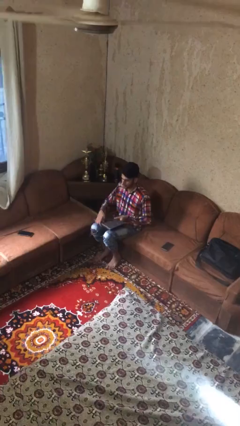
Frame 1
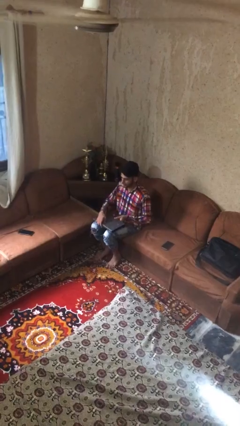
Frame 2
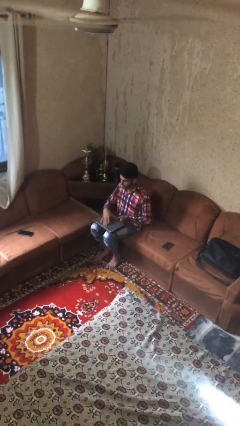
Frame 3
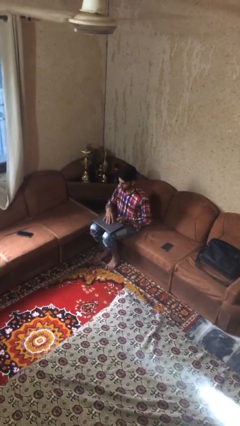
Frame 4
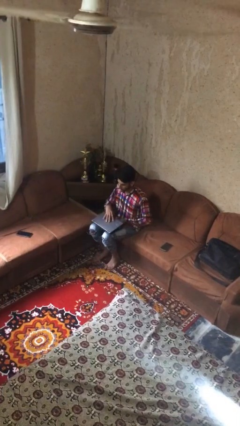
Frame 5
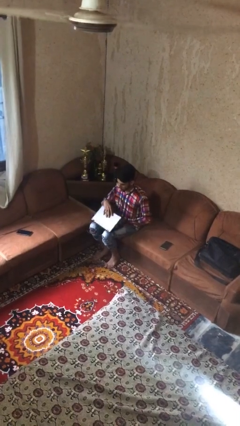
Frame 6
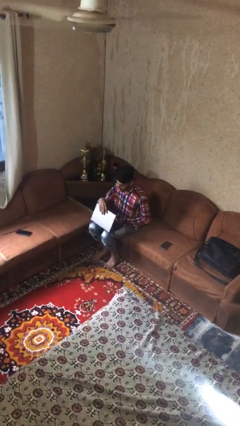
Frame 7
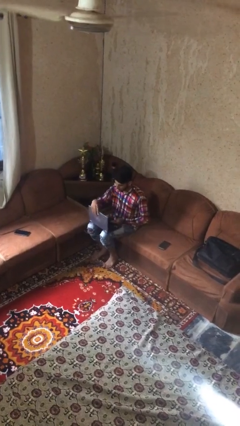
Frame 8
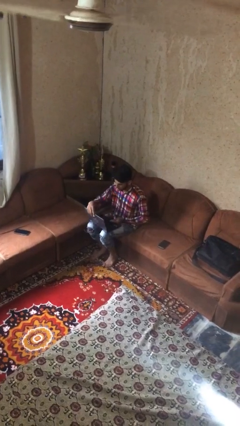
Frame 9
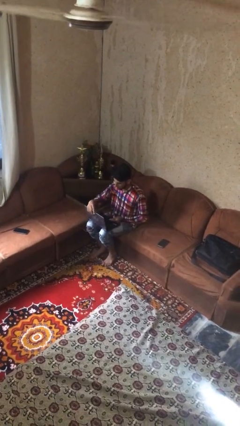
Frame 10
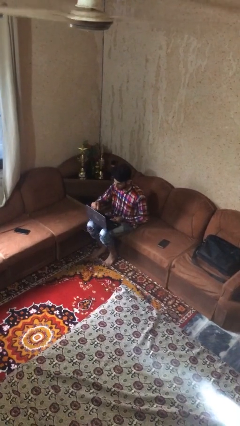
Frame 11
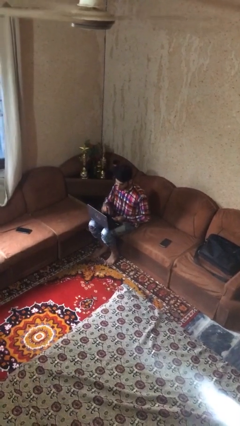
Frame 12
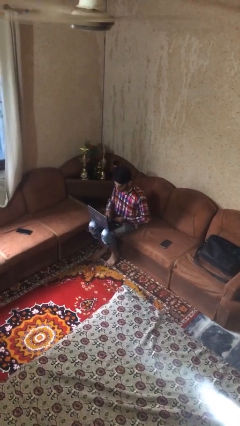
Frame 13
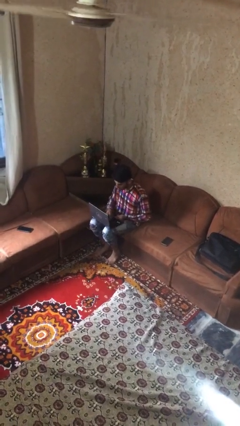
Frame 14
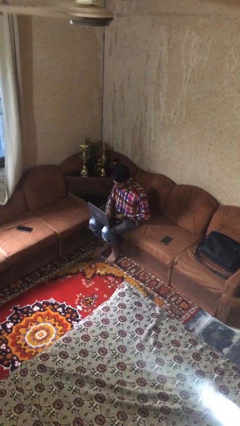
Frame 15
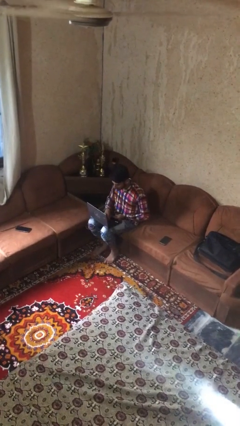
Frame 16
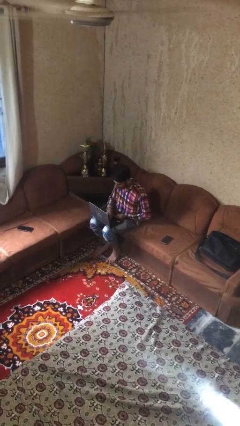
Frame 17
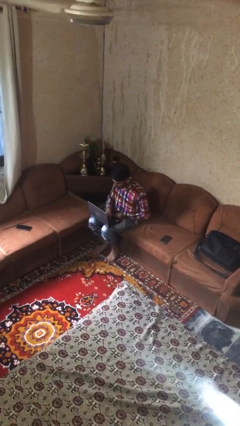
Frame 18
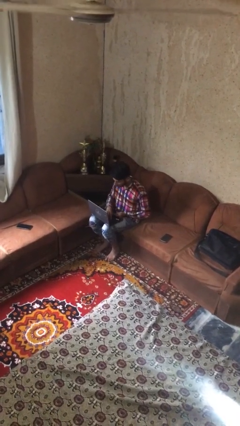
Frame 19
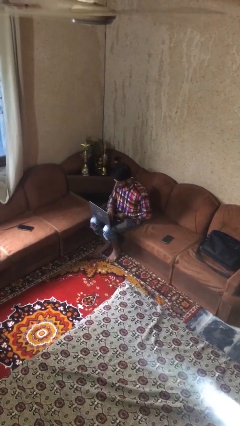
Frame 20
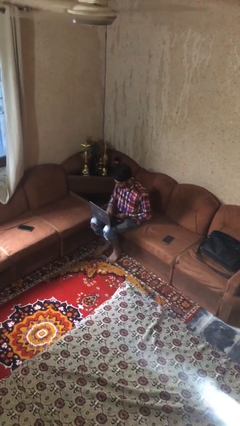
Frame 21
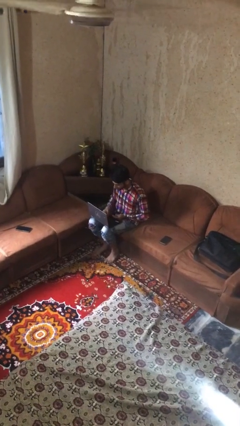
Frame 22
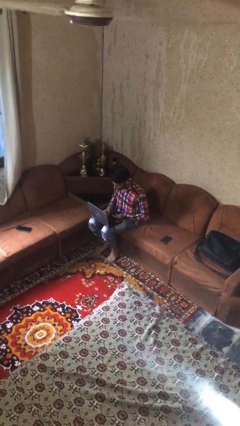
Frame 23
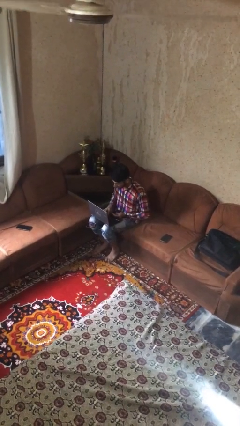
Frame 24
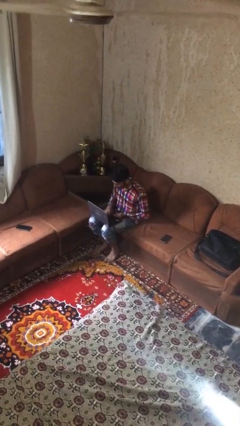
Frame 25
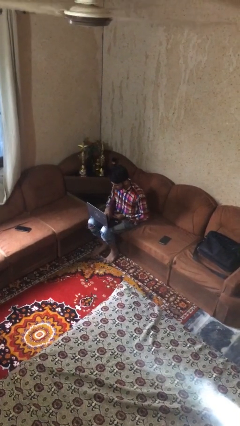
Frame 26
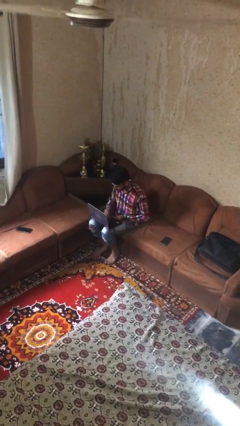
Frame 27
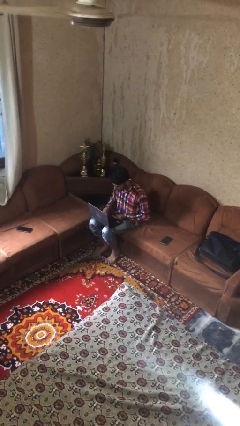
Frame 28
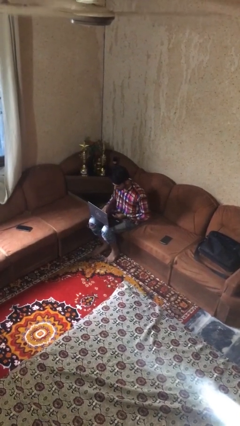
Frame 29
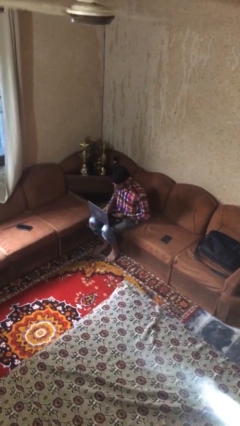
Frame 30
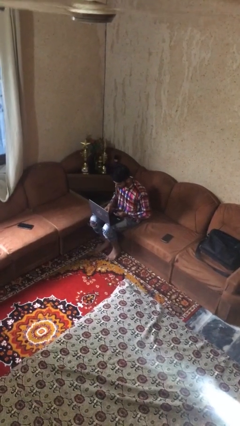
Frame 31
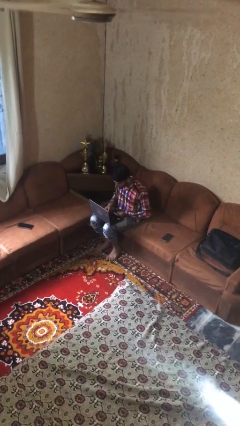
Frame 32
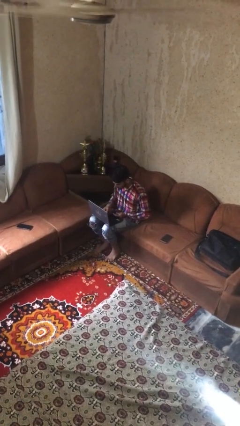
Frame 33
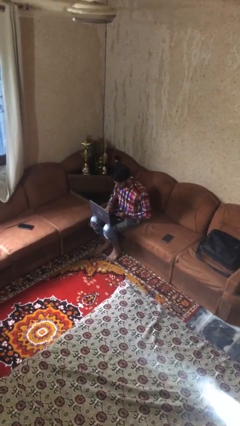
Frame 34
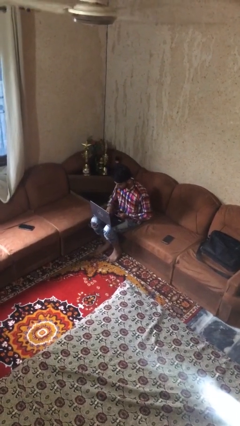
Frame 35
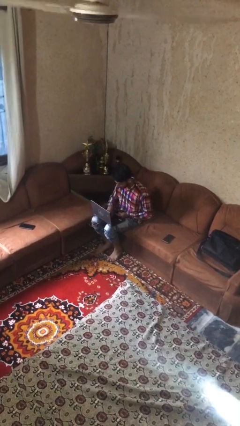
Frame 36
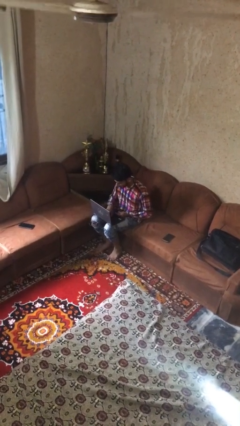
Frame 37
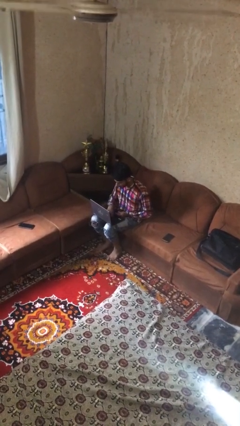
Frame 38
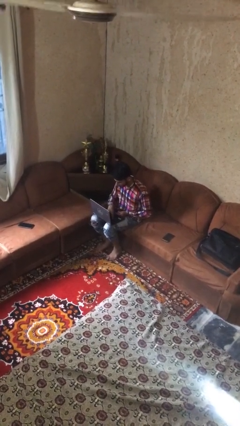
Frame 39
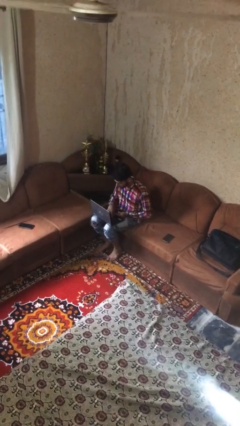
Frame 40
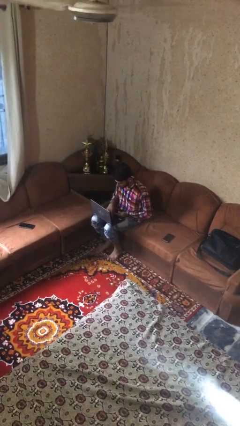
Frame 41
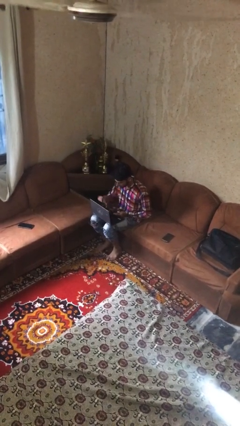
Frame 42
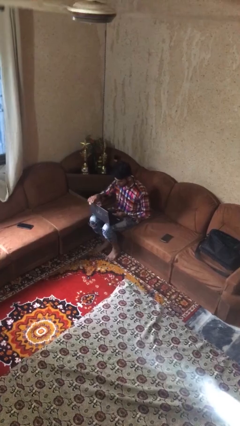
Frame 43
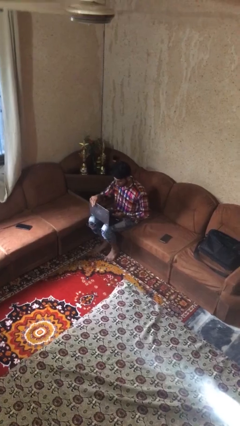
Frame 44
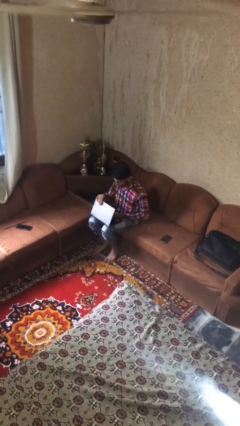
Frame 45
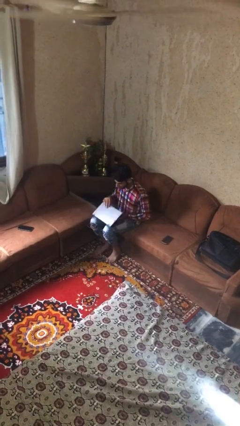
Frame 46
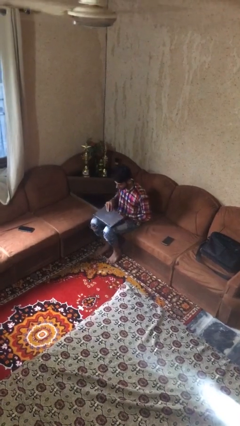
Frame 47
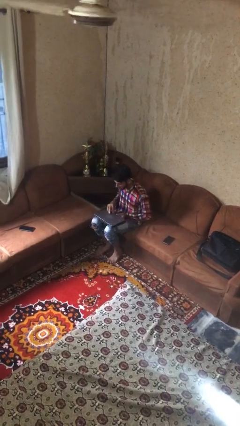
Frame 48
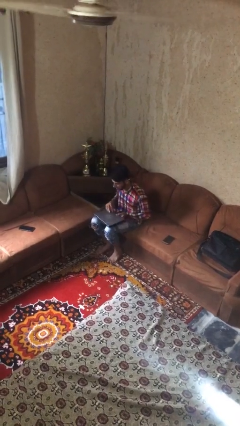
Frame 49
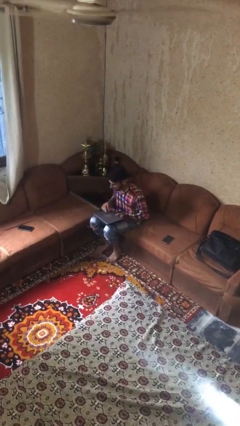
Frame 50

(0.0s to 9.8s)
person interacts with laptop

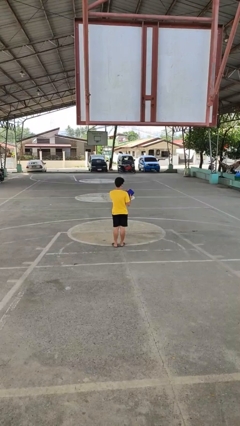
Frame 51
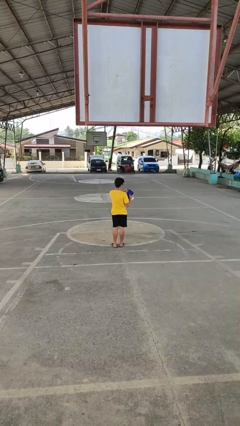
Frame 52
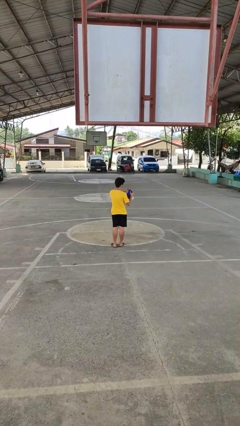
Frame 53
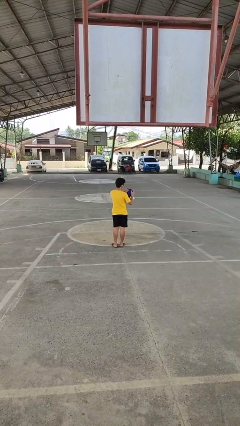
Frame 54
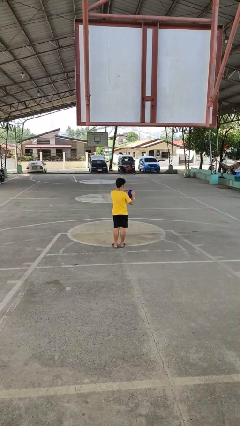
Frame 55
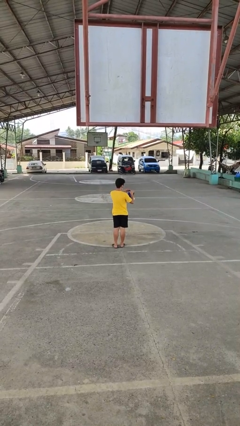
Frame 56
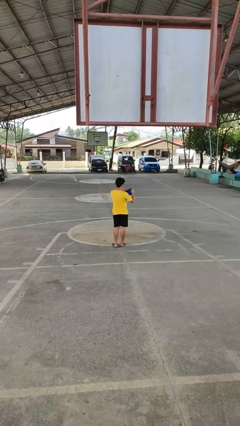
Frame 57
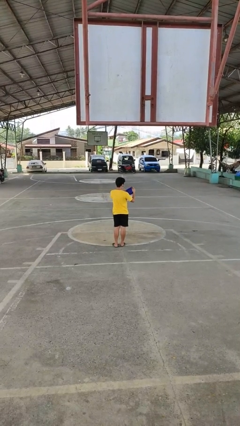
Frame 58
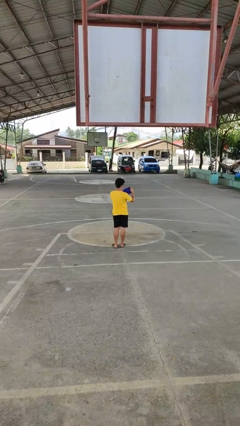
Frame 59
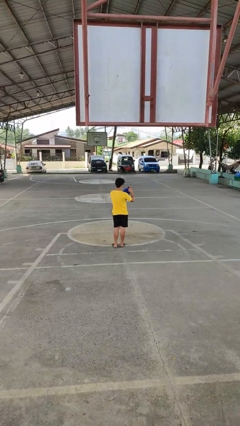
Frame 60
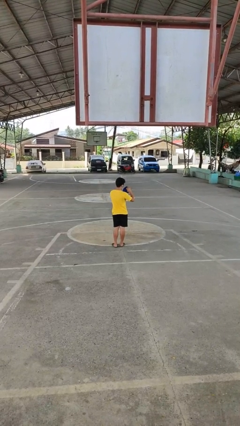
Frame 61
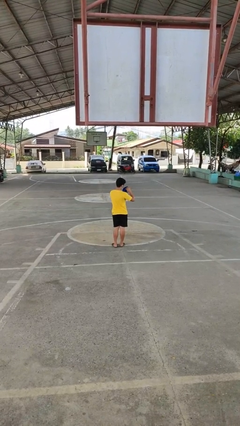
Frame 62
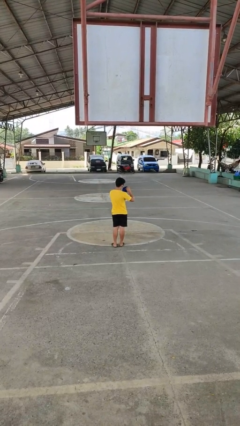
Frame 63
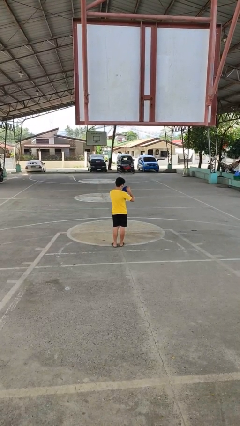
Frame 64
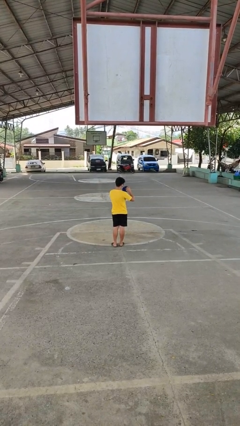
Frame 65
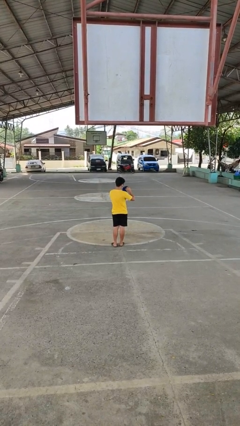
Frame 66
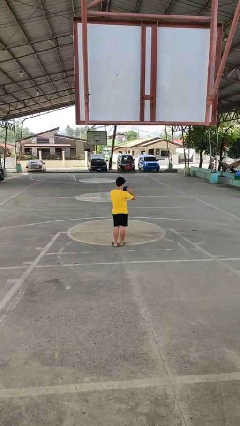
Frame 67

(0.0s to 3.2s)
person searches in purse

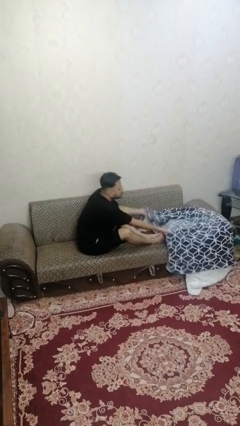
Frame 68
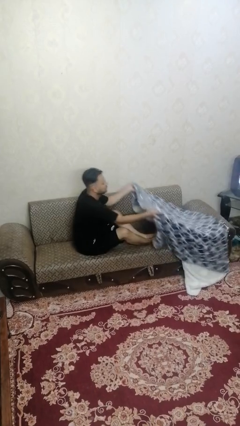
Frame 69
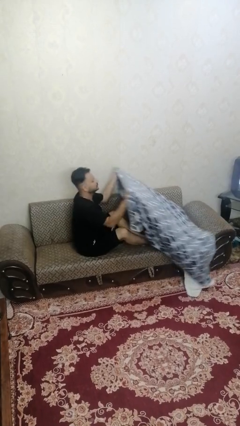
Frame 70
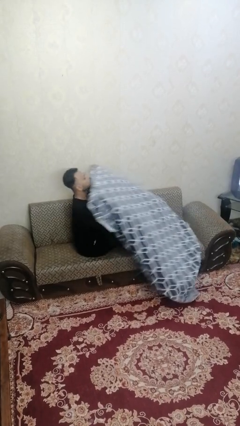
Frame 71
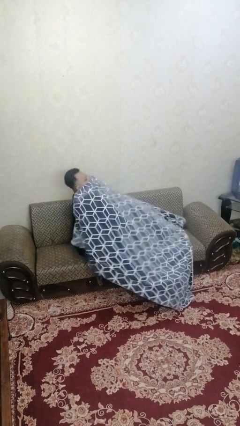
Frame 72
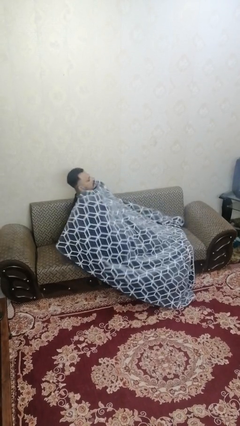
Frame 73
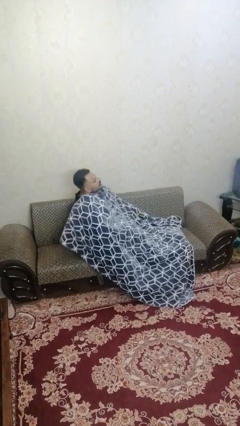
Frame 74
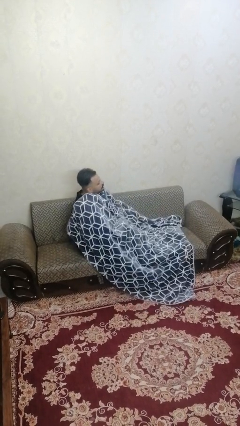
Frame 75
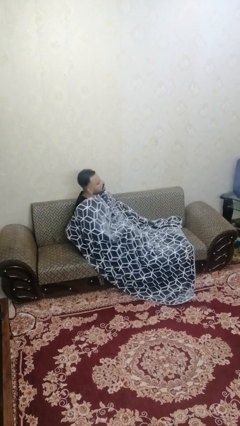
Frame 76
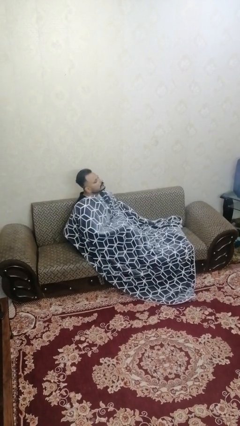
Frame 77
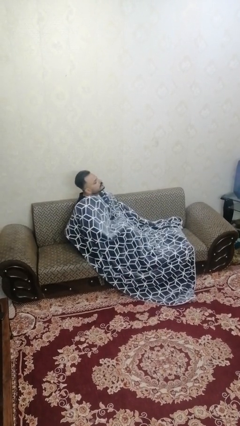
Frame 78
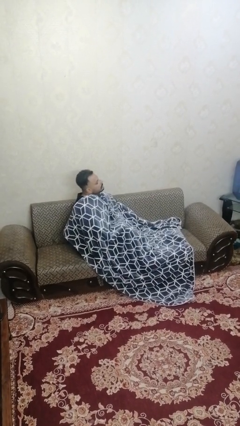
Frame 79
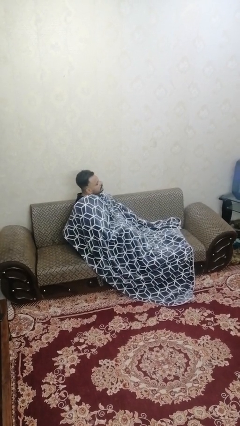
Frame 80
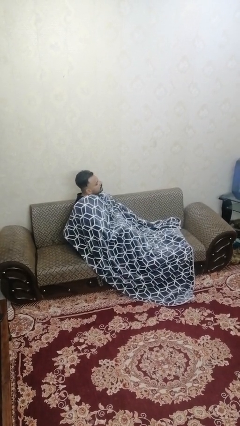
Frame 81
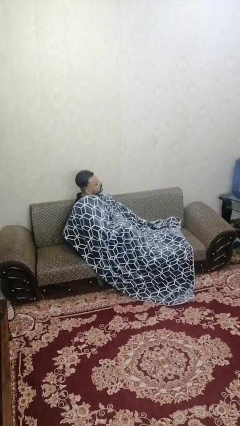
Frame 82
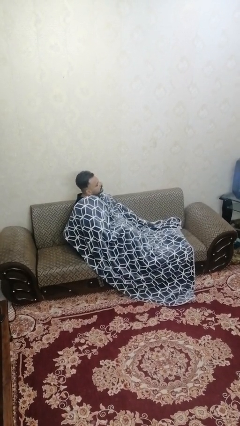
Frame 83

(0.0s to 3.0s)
person covers with blanket

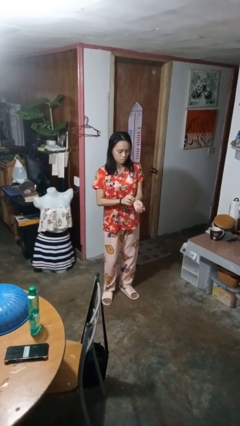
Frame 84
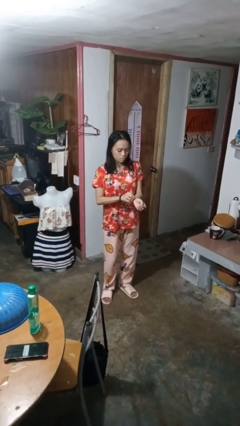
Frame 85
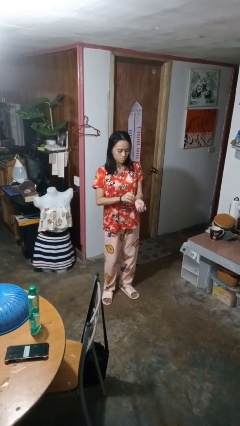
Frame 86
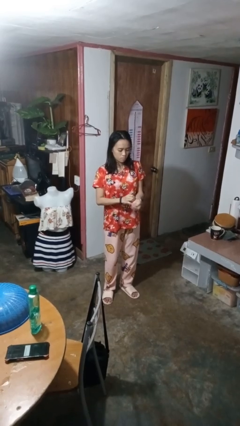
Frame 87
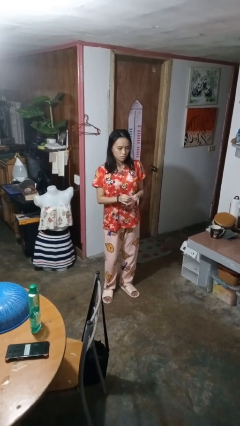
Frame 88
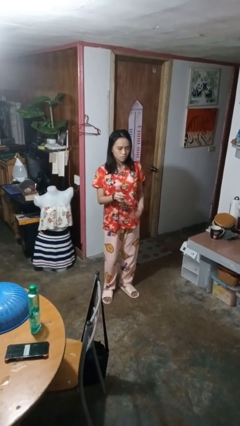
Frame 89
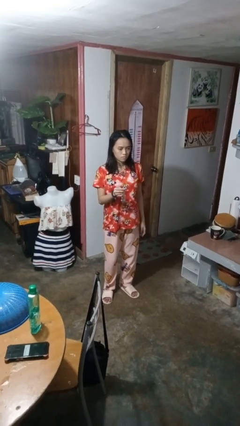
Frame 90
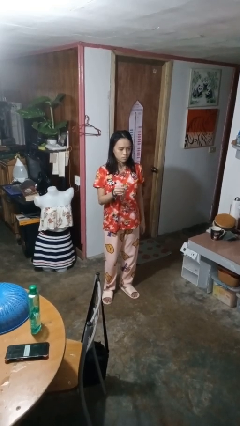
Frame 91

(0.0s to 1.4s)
person takes off wristwatch
